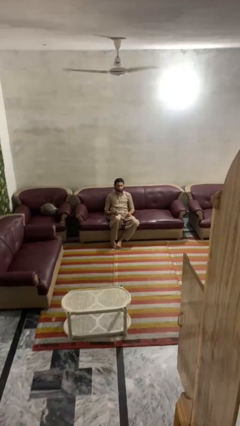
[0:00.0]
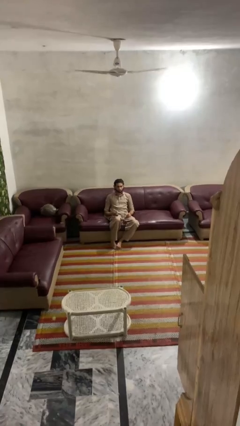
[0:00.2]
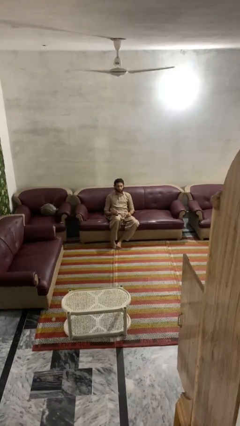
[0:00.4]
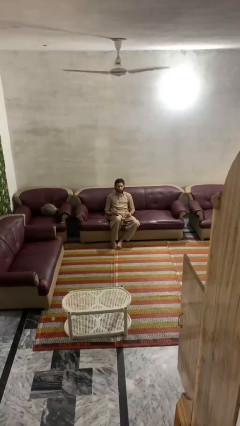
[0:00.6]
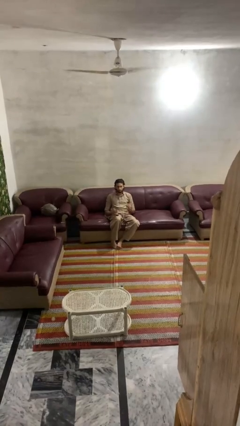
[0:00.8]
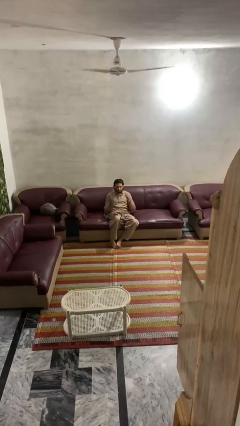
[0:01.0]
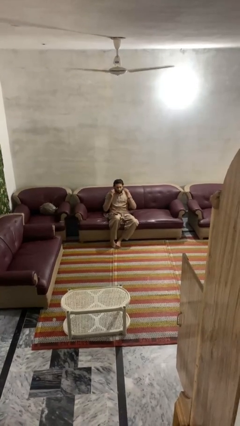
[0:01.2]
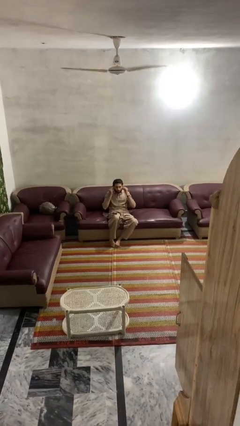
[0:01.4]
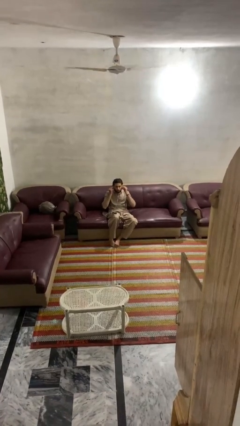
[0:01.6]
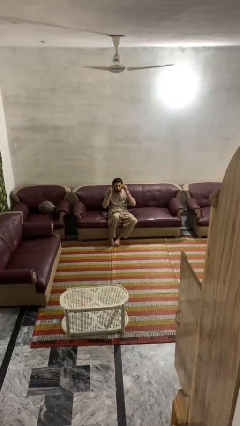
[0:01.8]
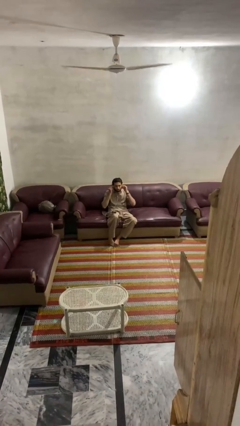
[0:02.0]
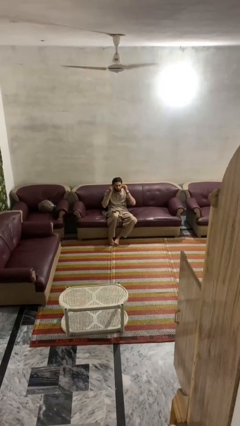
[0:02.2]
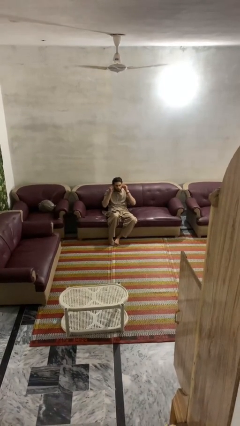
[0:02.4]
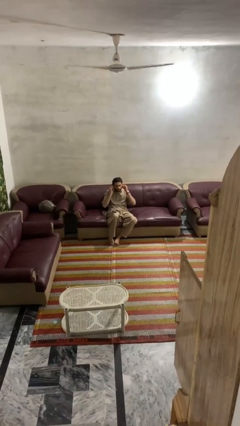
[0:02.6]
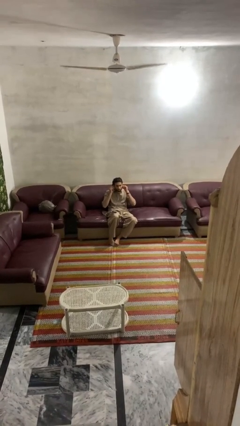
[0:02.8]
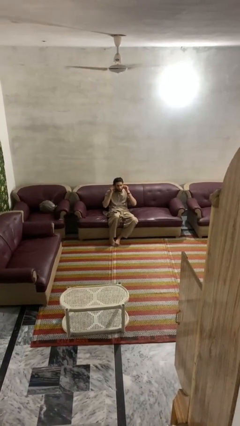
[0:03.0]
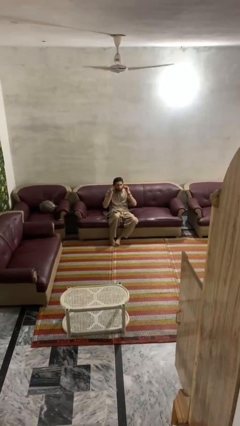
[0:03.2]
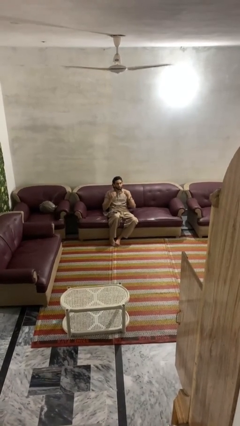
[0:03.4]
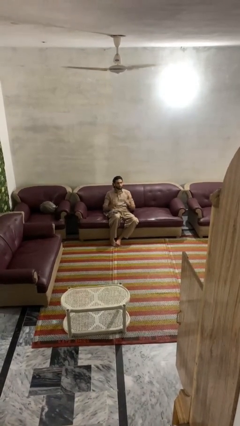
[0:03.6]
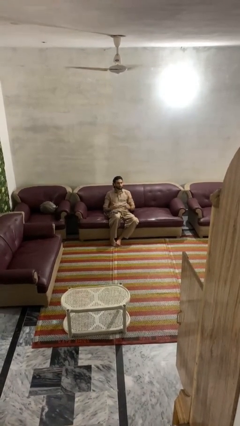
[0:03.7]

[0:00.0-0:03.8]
person puts on headphones

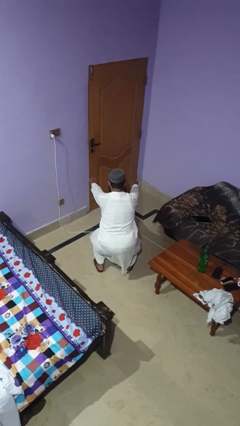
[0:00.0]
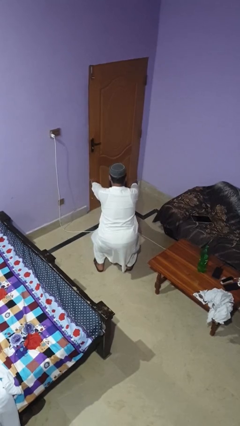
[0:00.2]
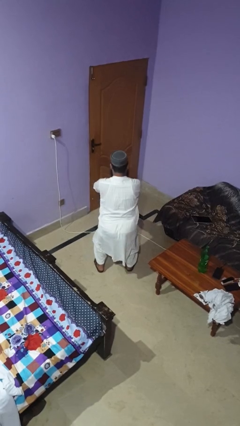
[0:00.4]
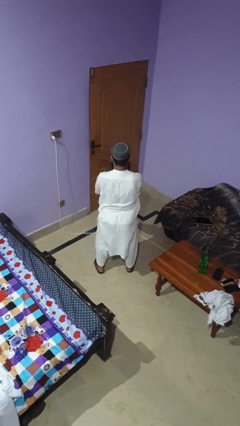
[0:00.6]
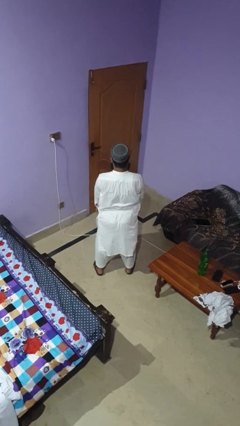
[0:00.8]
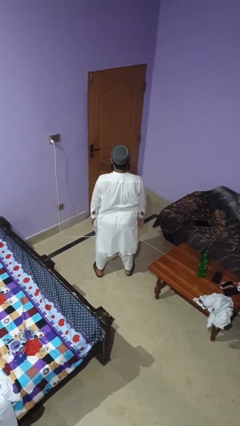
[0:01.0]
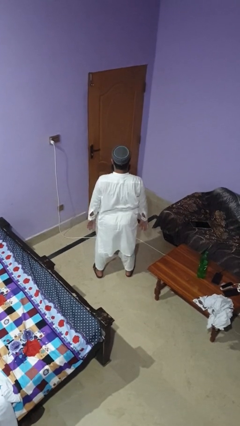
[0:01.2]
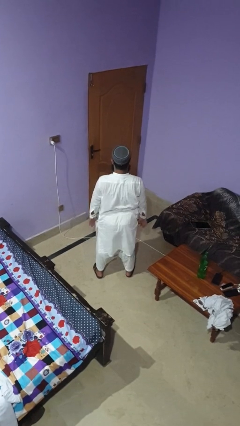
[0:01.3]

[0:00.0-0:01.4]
person stands up

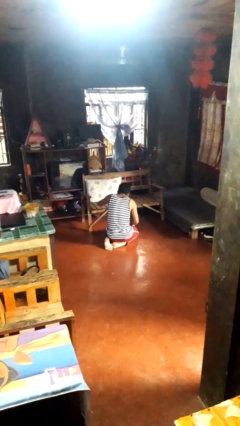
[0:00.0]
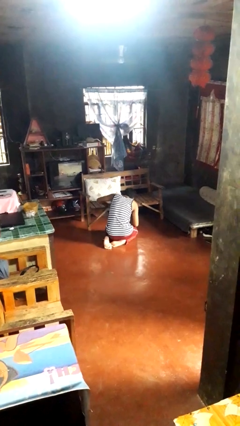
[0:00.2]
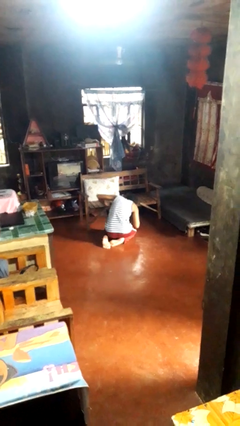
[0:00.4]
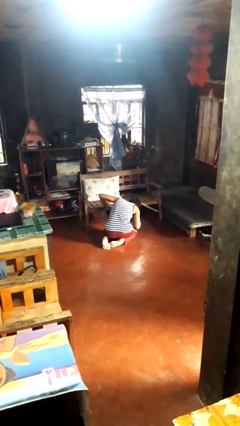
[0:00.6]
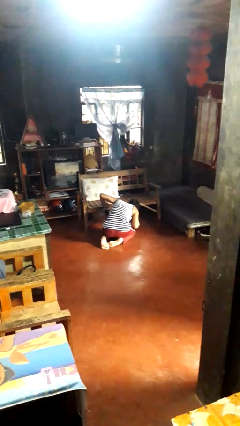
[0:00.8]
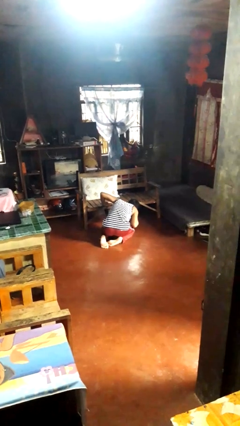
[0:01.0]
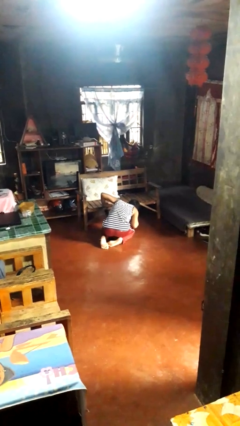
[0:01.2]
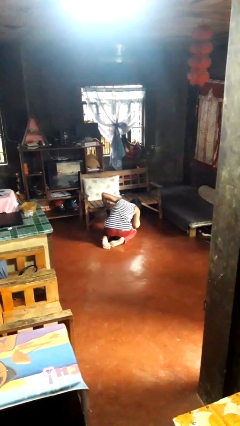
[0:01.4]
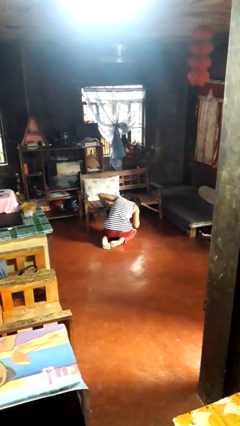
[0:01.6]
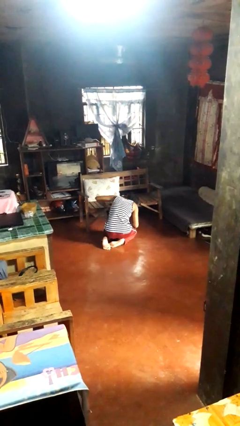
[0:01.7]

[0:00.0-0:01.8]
person searches under couch

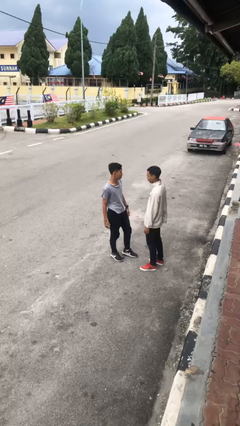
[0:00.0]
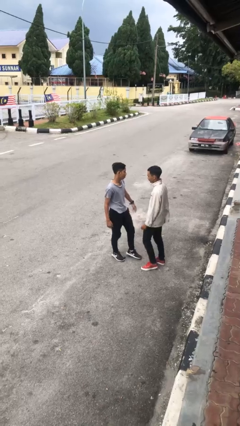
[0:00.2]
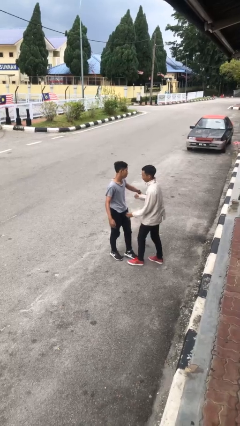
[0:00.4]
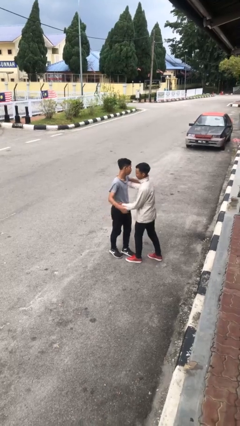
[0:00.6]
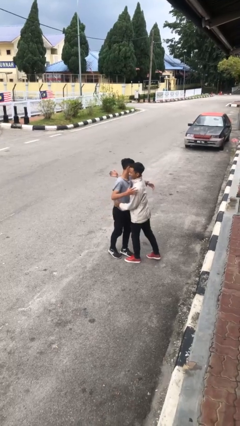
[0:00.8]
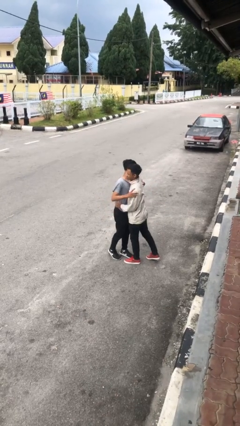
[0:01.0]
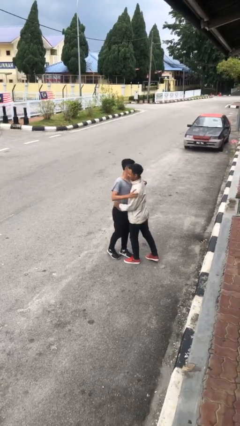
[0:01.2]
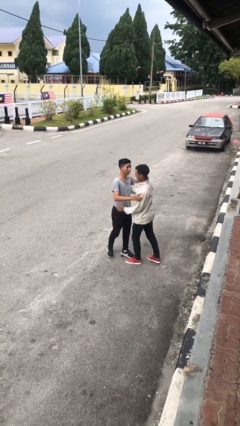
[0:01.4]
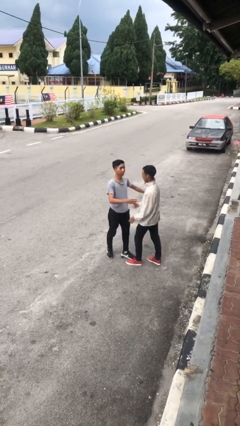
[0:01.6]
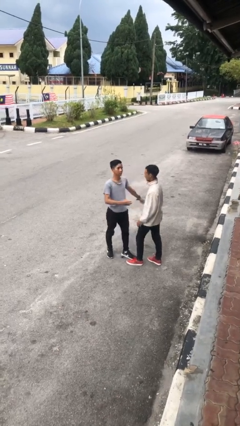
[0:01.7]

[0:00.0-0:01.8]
person embraces person

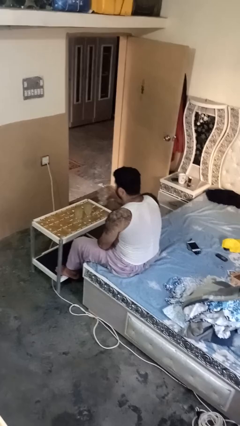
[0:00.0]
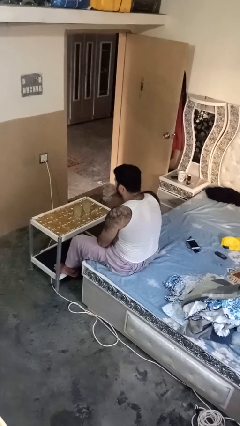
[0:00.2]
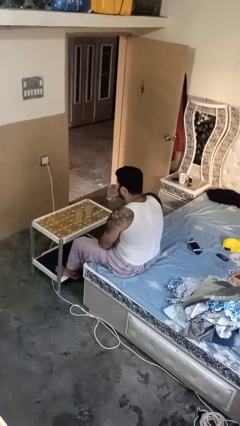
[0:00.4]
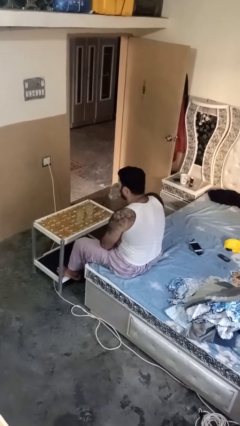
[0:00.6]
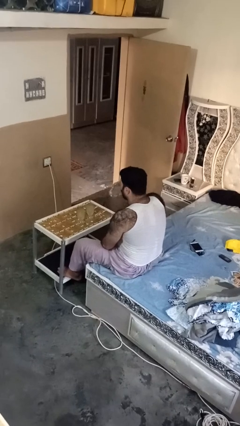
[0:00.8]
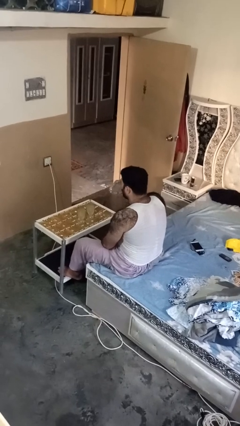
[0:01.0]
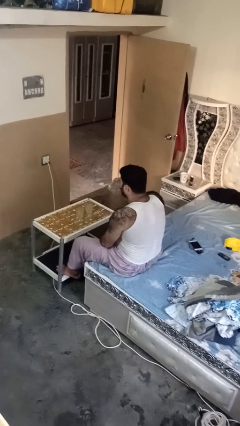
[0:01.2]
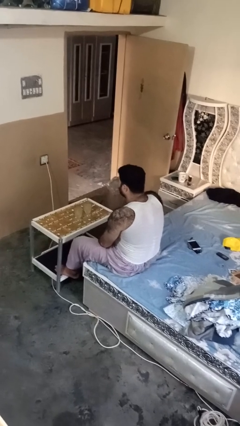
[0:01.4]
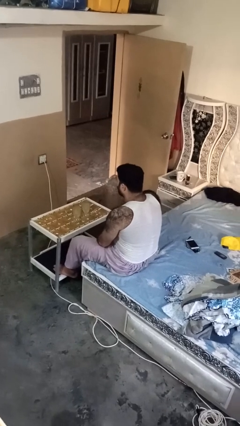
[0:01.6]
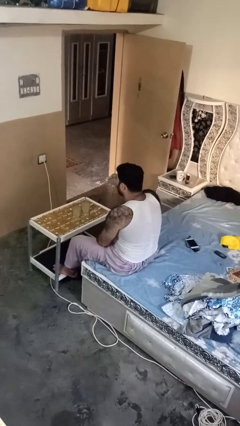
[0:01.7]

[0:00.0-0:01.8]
person drinks from shotglass

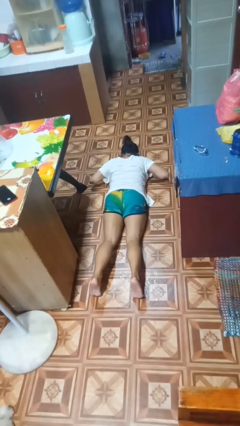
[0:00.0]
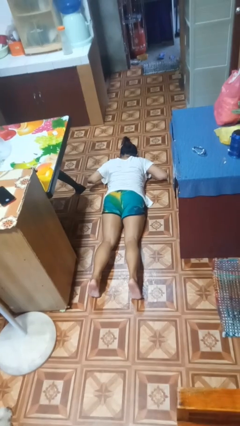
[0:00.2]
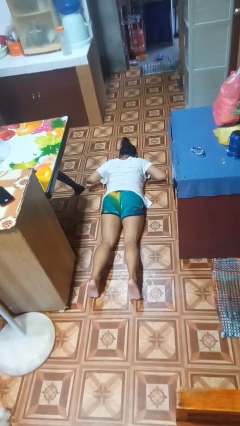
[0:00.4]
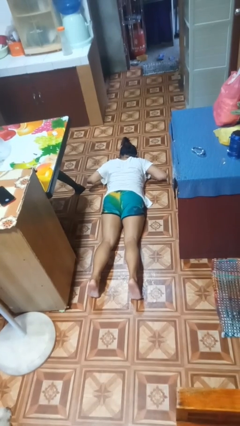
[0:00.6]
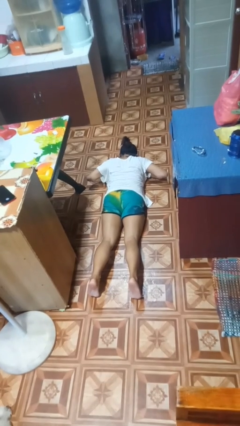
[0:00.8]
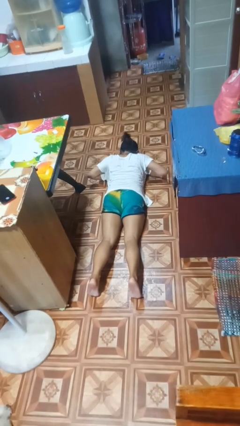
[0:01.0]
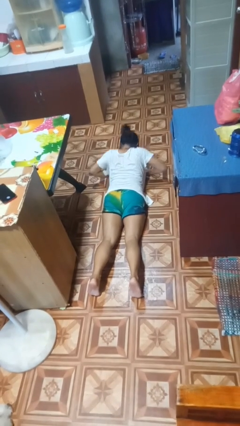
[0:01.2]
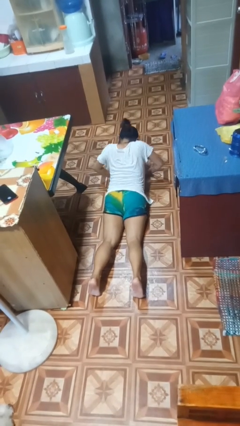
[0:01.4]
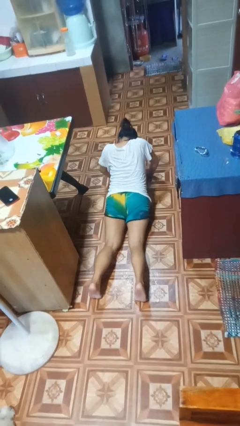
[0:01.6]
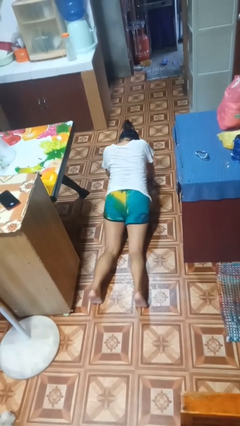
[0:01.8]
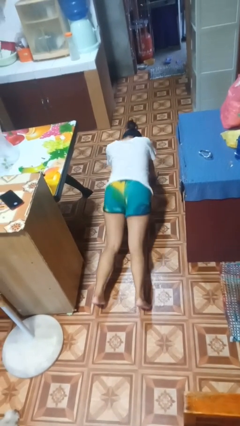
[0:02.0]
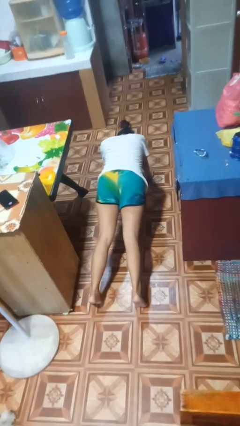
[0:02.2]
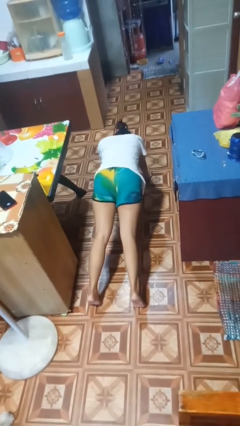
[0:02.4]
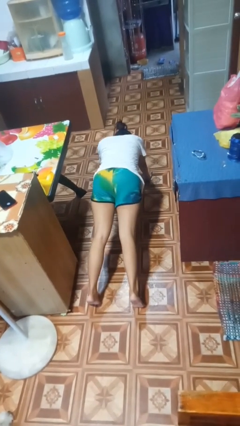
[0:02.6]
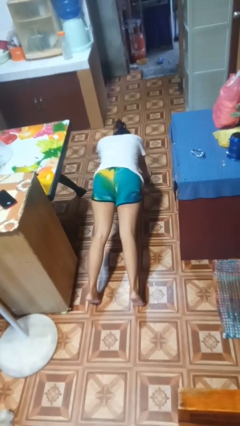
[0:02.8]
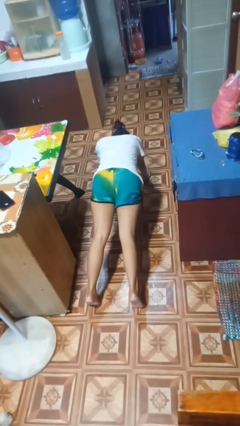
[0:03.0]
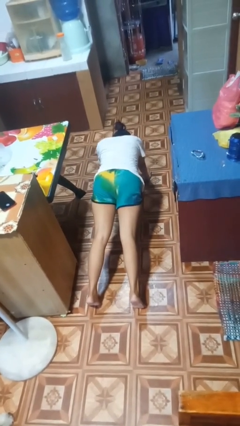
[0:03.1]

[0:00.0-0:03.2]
person exercises with pushup

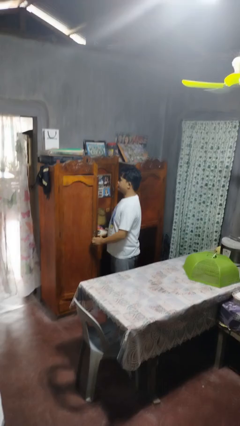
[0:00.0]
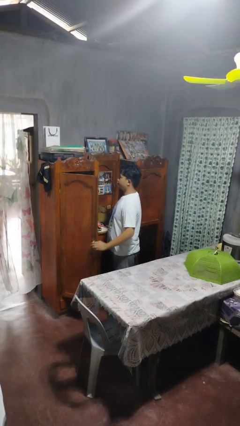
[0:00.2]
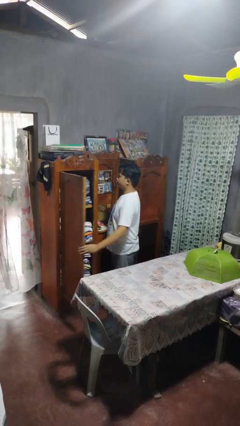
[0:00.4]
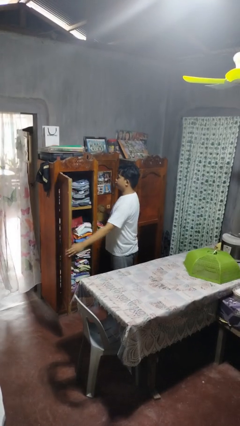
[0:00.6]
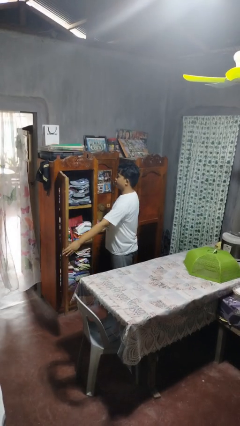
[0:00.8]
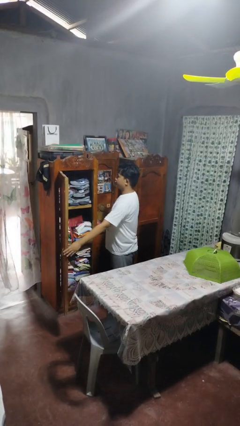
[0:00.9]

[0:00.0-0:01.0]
person opens closet door

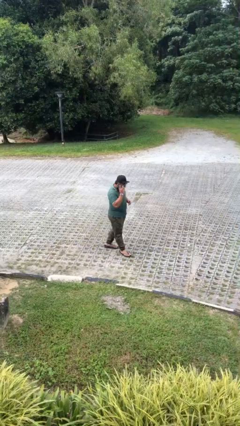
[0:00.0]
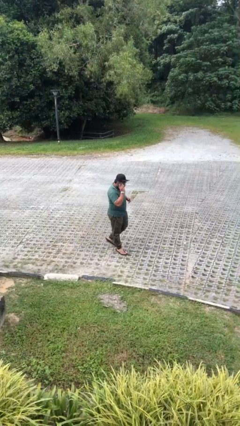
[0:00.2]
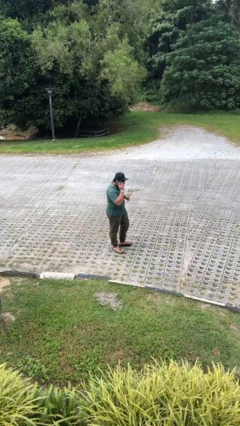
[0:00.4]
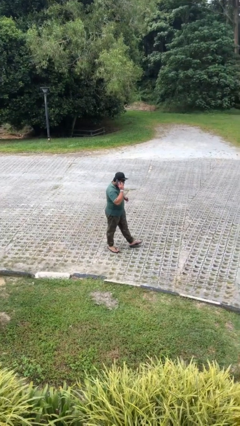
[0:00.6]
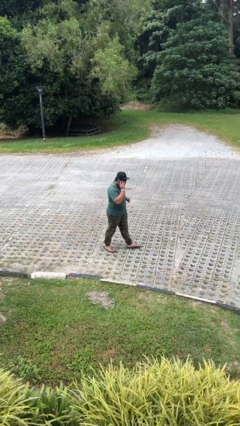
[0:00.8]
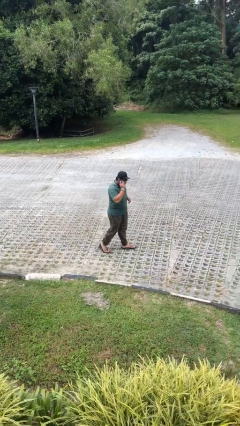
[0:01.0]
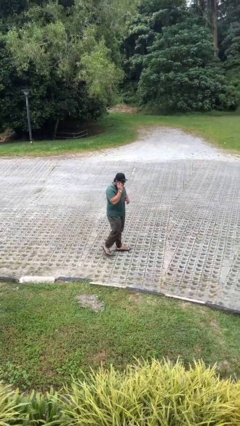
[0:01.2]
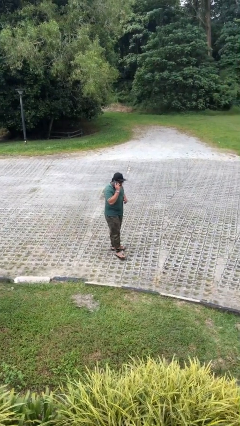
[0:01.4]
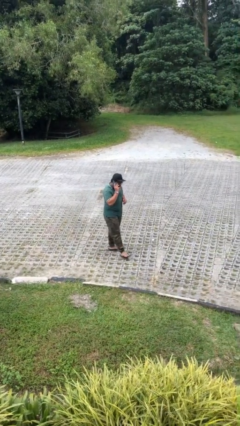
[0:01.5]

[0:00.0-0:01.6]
person talks on phone

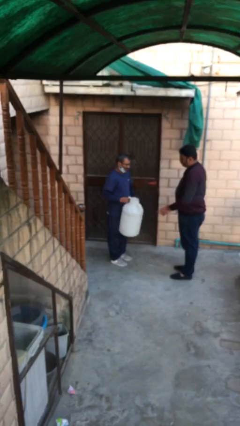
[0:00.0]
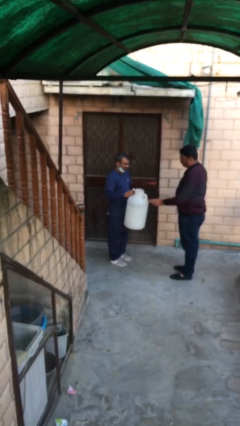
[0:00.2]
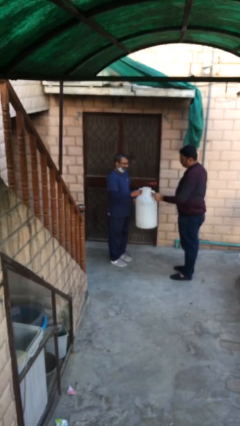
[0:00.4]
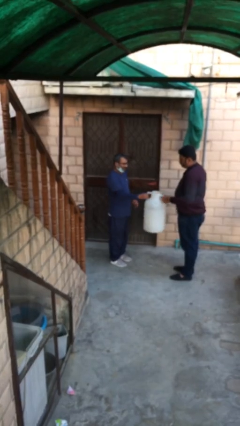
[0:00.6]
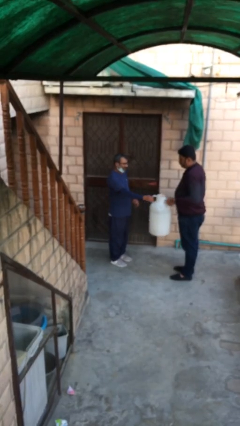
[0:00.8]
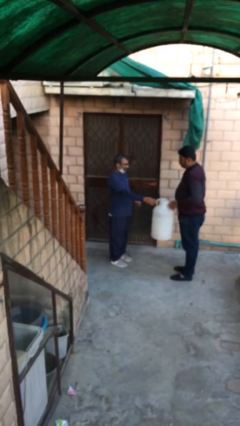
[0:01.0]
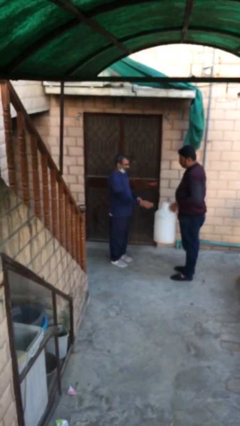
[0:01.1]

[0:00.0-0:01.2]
person transfers object to person
